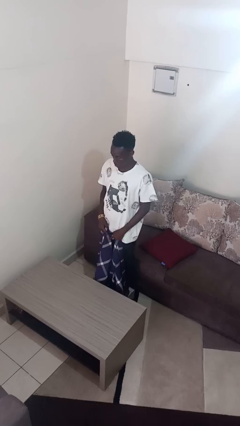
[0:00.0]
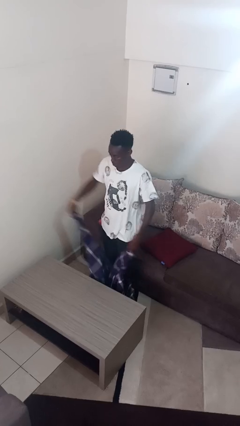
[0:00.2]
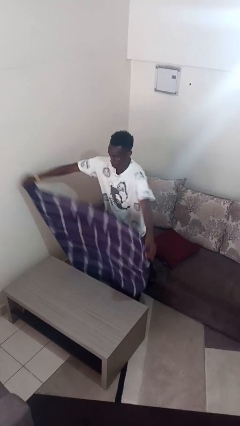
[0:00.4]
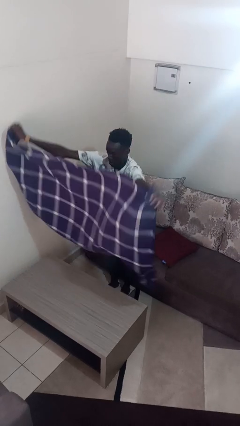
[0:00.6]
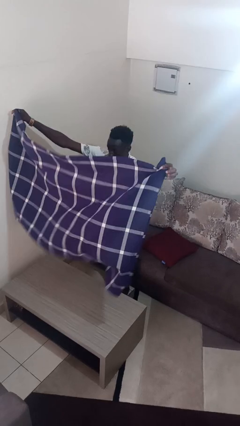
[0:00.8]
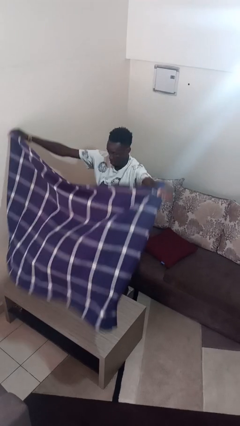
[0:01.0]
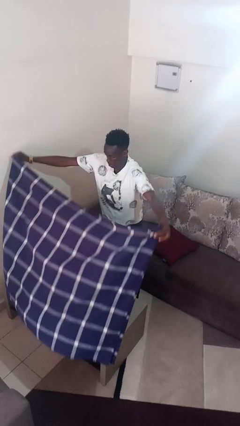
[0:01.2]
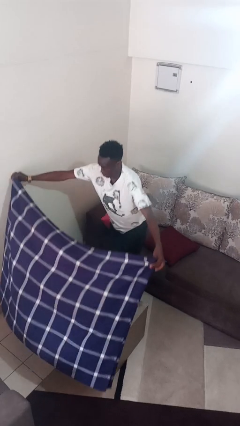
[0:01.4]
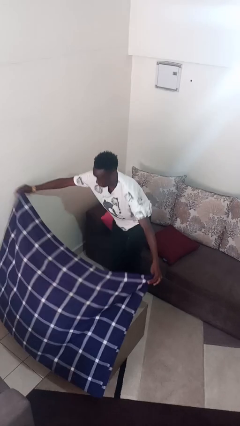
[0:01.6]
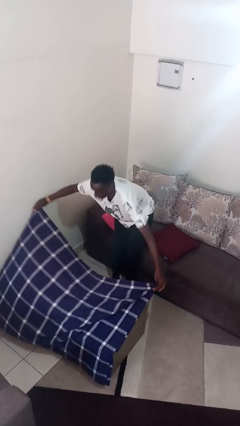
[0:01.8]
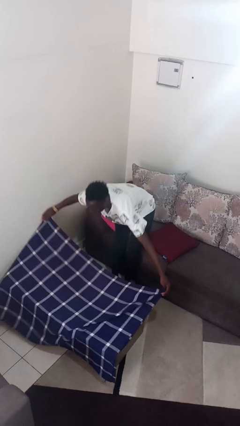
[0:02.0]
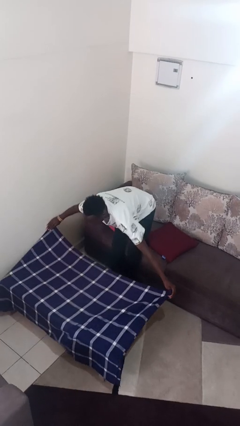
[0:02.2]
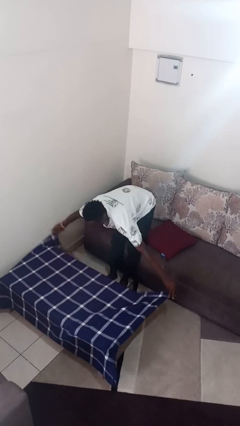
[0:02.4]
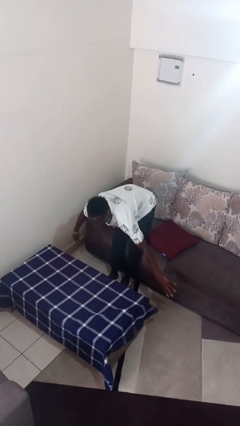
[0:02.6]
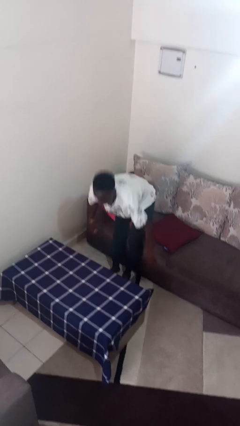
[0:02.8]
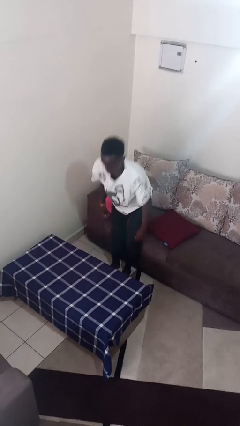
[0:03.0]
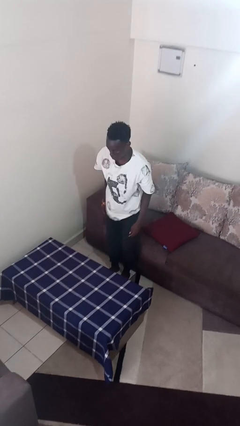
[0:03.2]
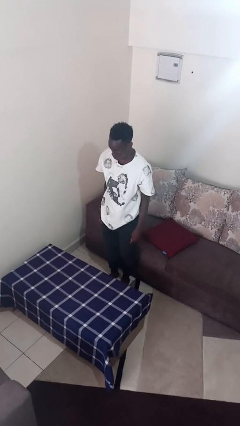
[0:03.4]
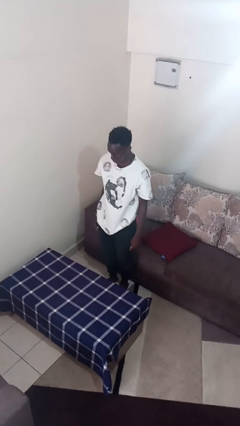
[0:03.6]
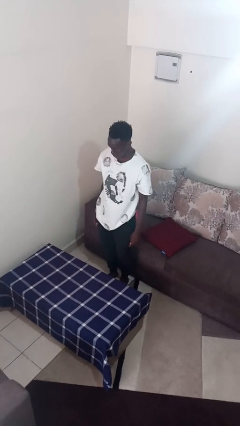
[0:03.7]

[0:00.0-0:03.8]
person spreads tablecloth

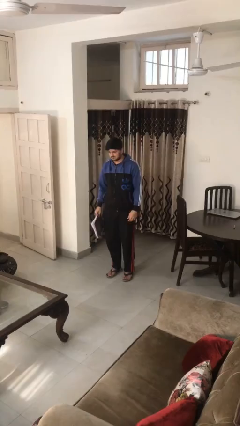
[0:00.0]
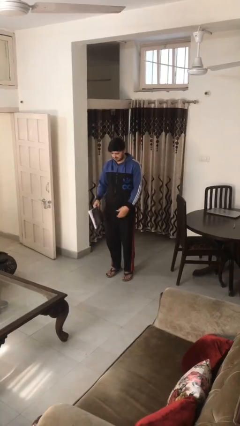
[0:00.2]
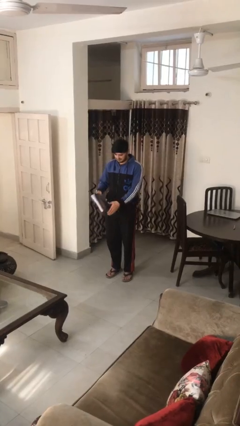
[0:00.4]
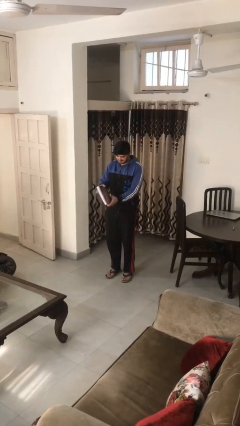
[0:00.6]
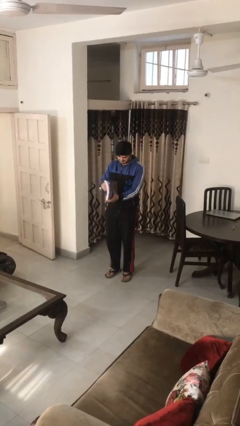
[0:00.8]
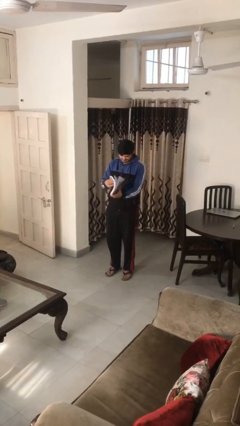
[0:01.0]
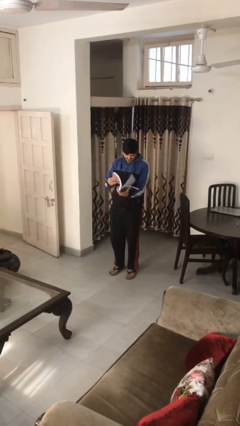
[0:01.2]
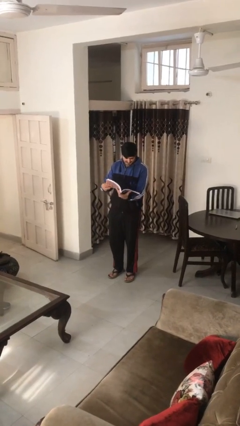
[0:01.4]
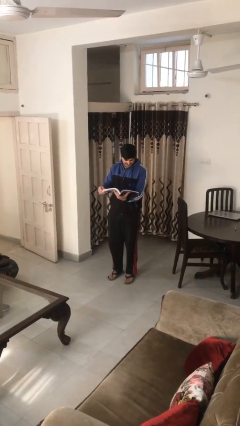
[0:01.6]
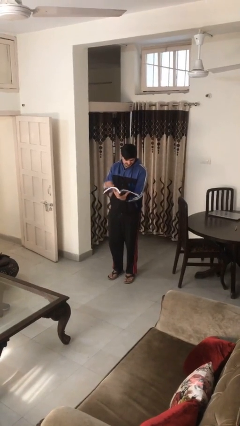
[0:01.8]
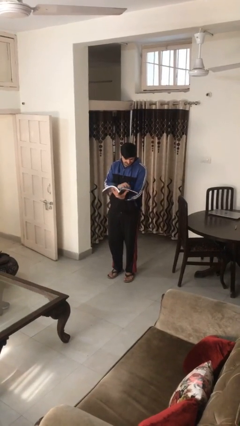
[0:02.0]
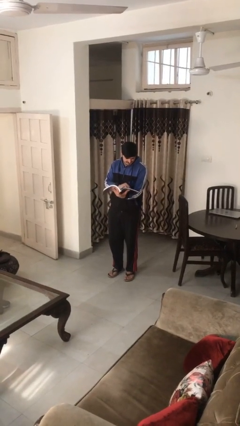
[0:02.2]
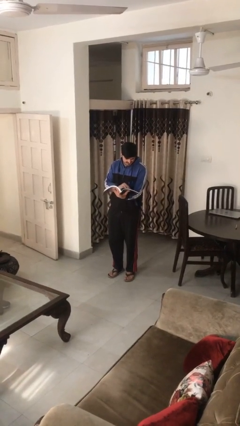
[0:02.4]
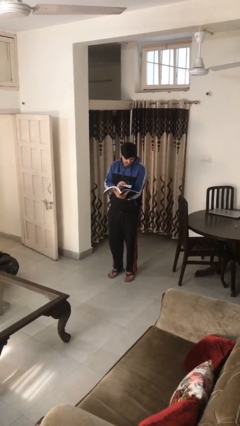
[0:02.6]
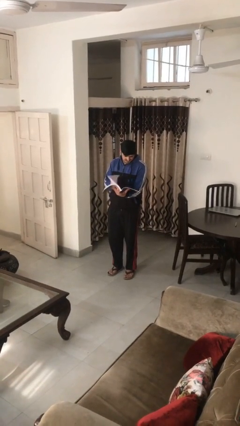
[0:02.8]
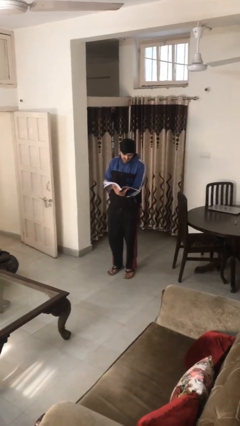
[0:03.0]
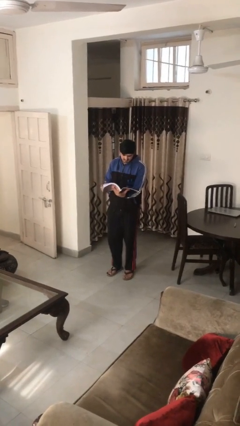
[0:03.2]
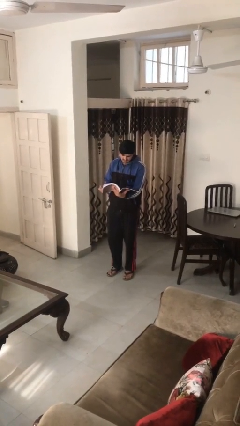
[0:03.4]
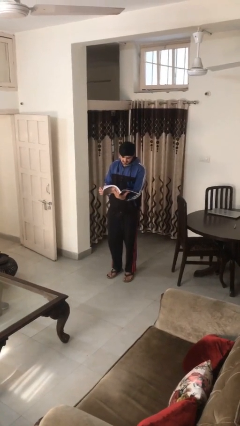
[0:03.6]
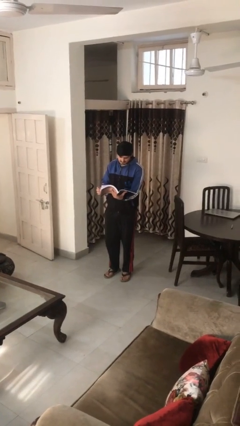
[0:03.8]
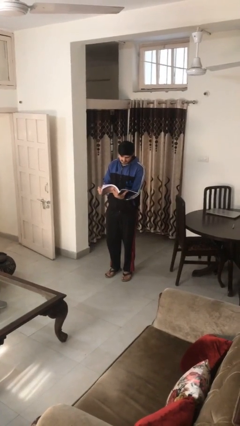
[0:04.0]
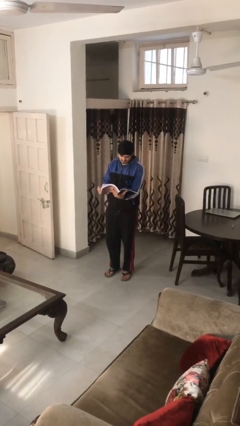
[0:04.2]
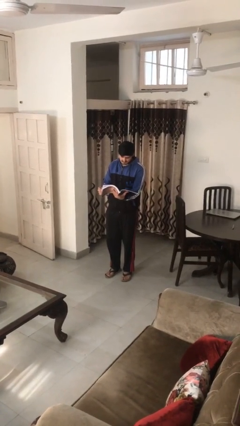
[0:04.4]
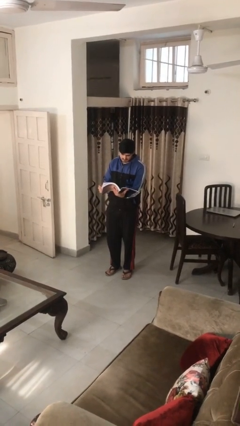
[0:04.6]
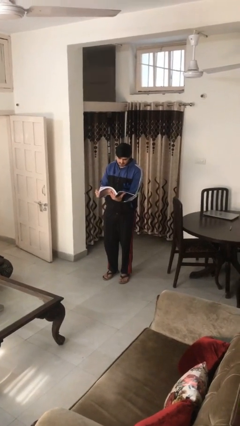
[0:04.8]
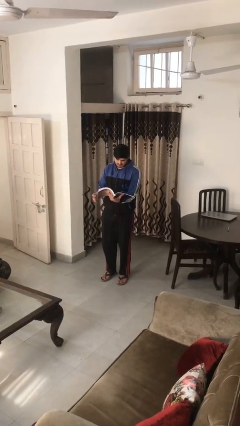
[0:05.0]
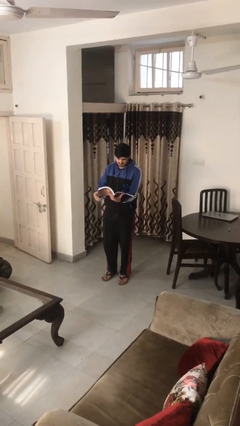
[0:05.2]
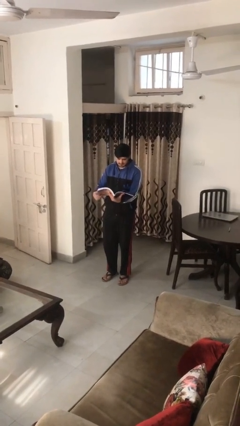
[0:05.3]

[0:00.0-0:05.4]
person reads document

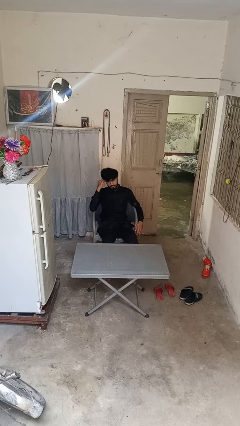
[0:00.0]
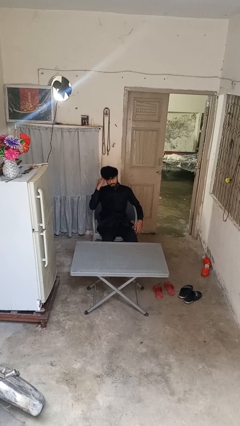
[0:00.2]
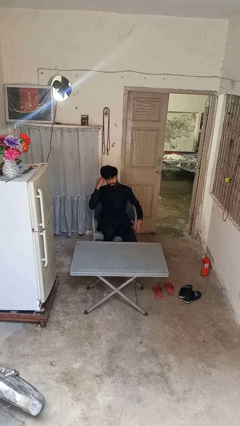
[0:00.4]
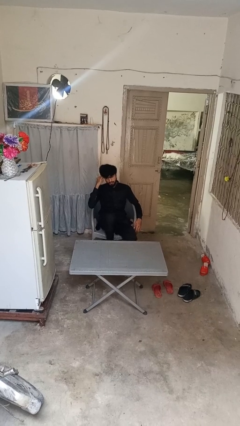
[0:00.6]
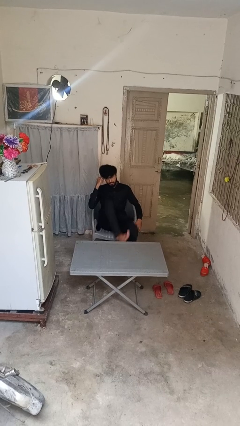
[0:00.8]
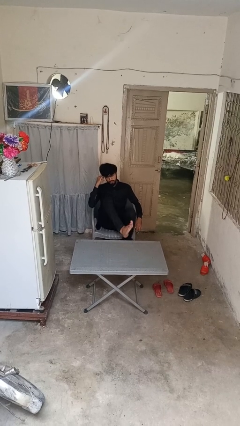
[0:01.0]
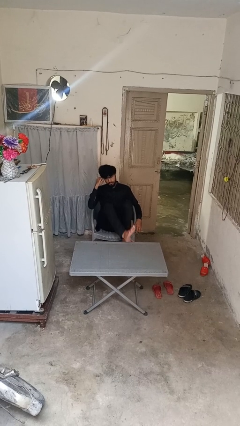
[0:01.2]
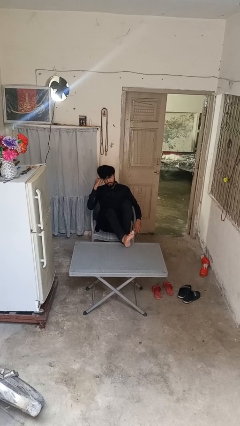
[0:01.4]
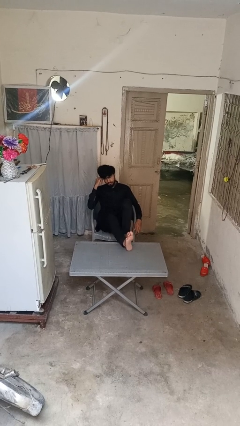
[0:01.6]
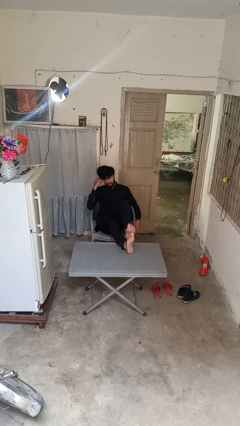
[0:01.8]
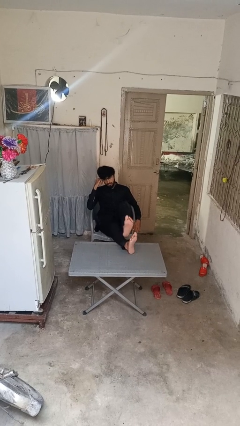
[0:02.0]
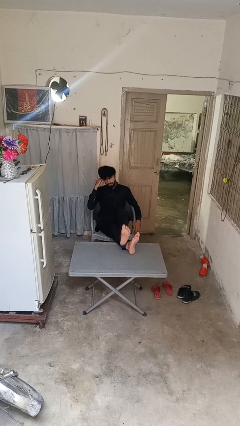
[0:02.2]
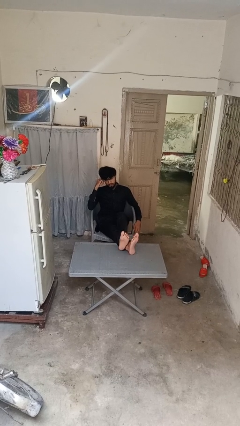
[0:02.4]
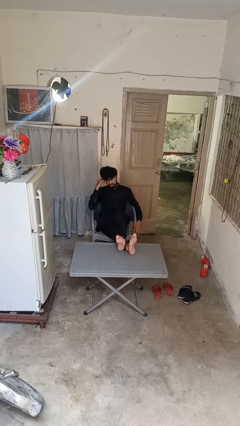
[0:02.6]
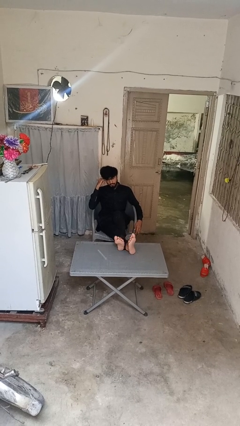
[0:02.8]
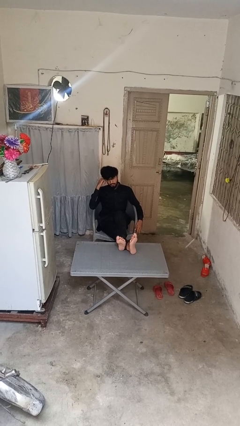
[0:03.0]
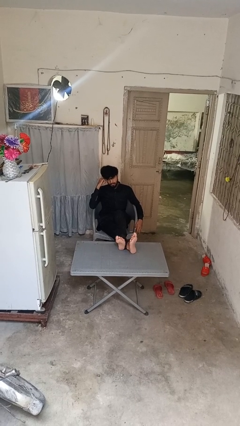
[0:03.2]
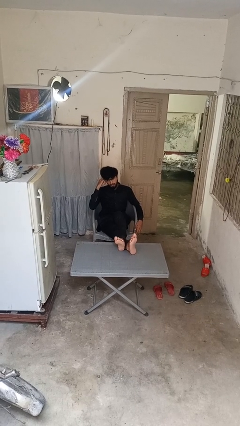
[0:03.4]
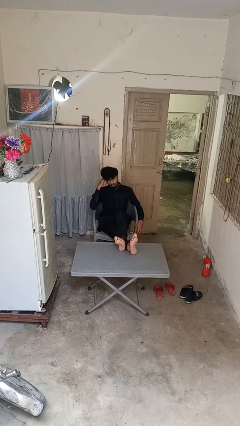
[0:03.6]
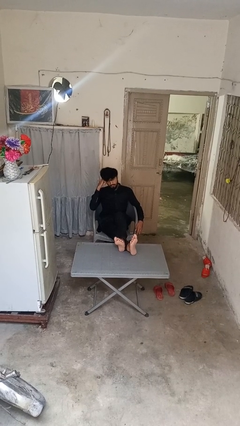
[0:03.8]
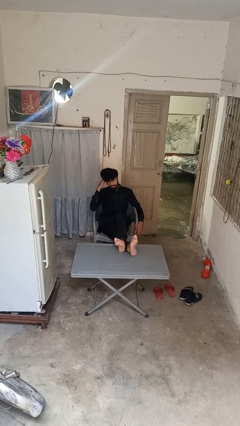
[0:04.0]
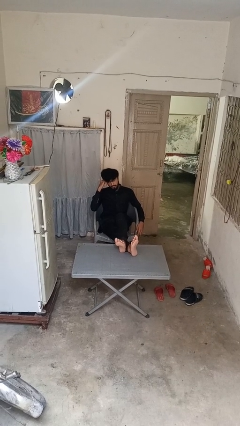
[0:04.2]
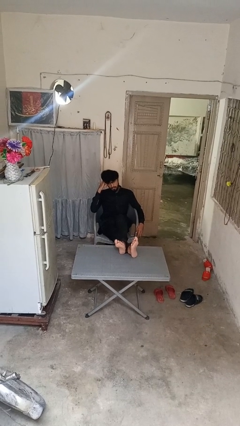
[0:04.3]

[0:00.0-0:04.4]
person puts feet up

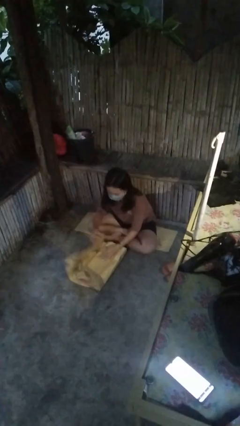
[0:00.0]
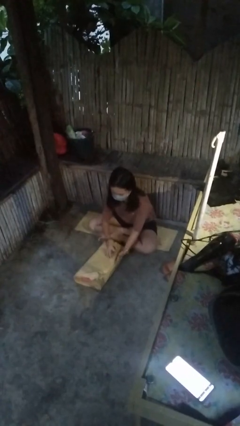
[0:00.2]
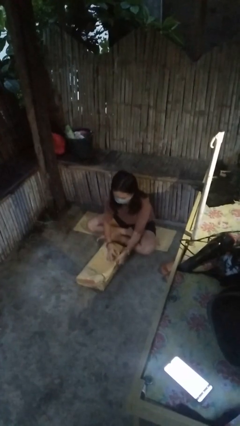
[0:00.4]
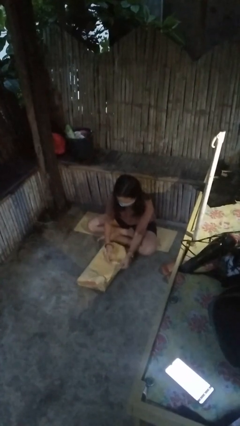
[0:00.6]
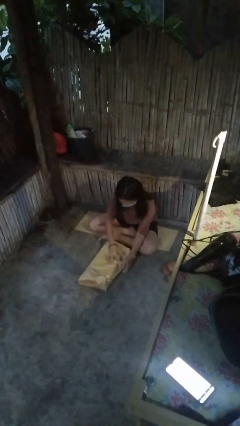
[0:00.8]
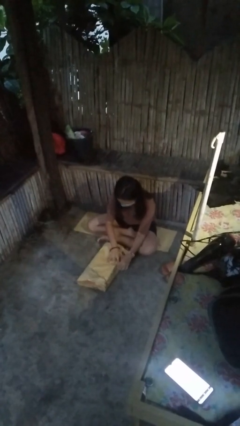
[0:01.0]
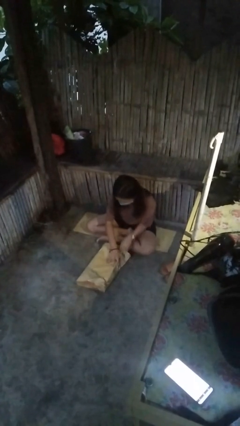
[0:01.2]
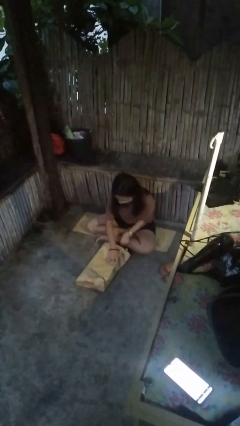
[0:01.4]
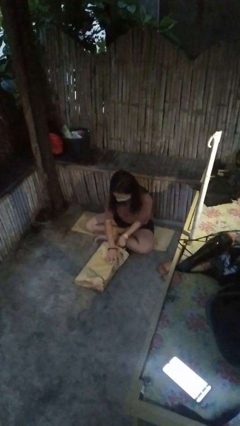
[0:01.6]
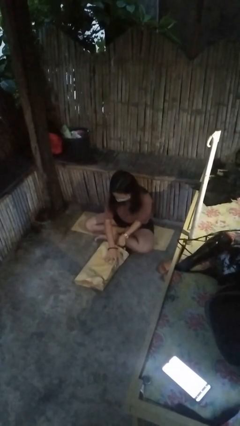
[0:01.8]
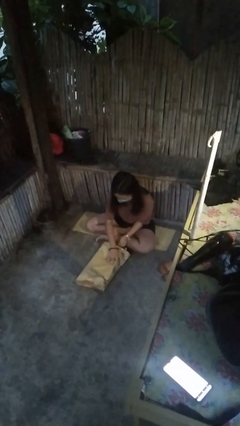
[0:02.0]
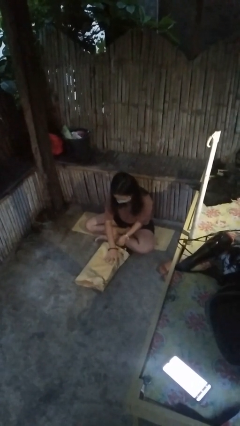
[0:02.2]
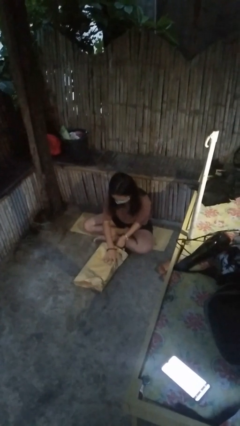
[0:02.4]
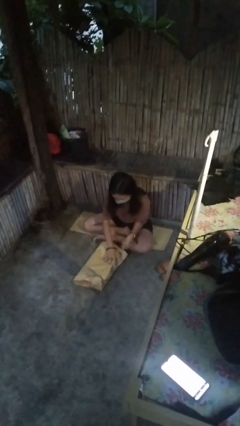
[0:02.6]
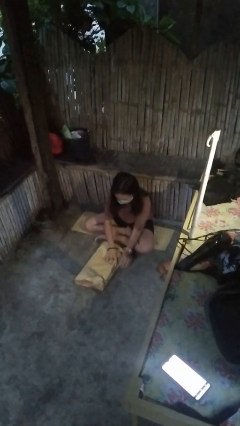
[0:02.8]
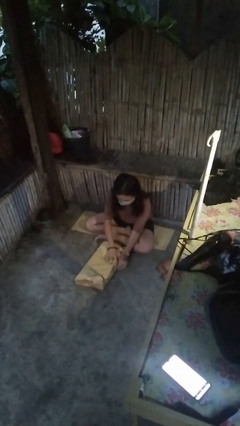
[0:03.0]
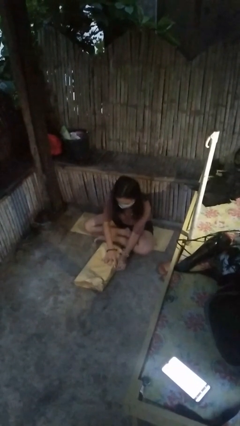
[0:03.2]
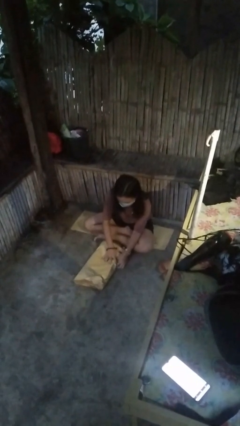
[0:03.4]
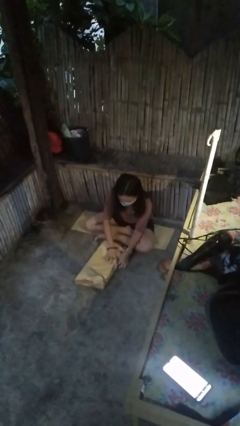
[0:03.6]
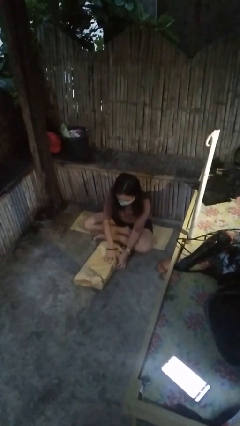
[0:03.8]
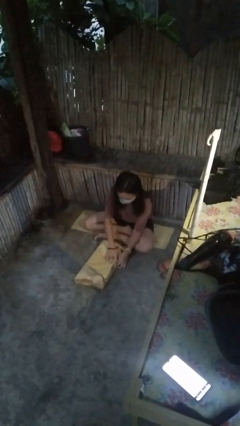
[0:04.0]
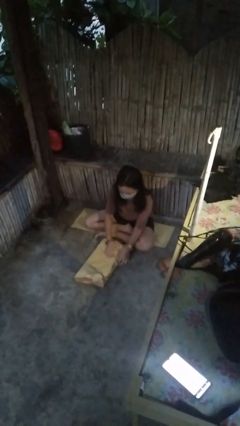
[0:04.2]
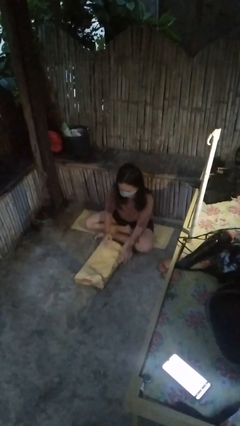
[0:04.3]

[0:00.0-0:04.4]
person wraps box
